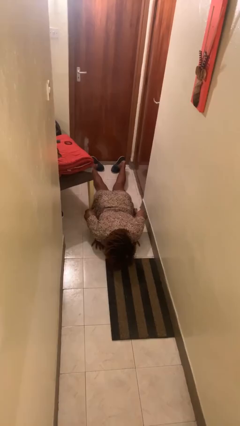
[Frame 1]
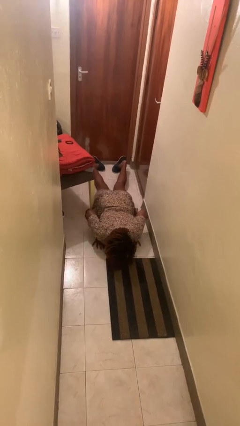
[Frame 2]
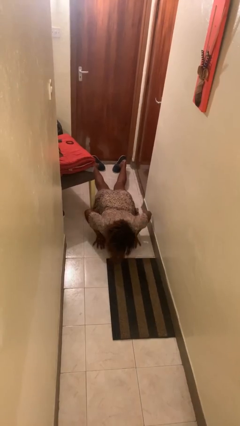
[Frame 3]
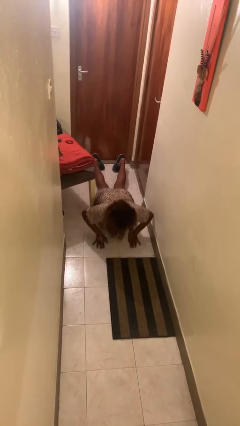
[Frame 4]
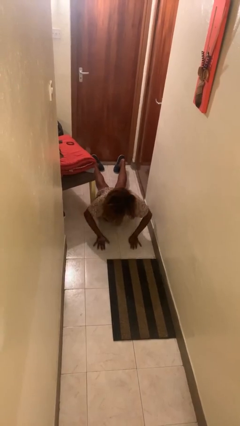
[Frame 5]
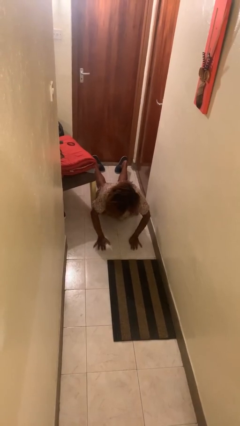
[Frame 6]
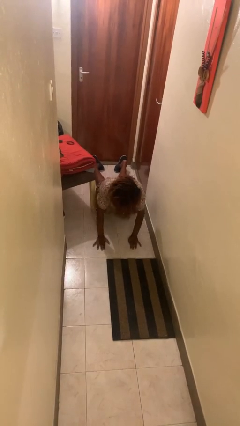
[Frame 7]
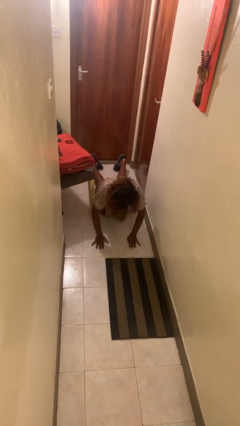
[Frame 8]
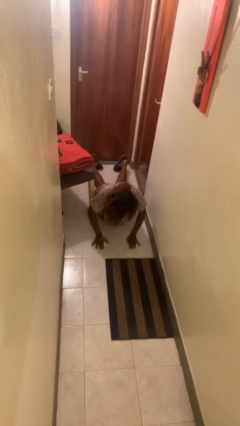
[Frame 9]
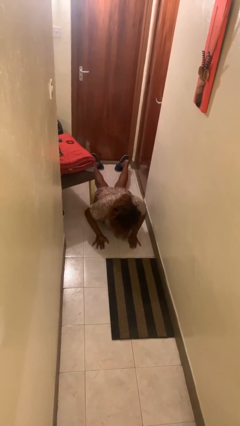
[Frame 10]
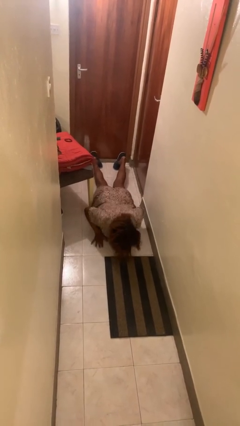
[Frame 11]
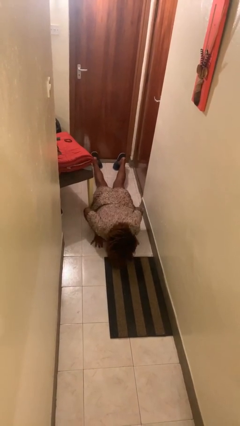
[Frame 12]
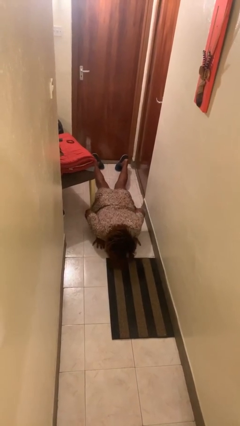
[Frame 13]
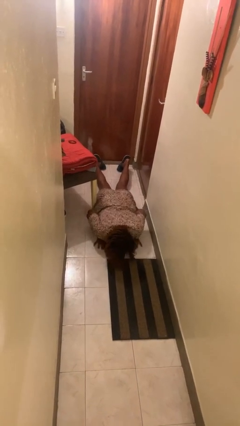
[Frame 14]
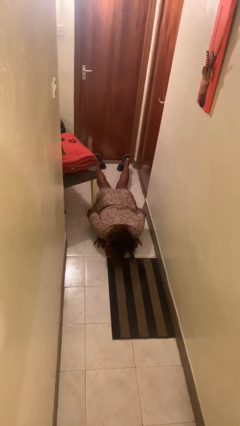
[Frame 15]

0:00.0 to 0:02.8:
person exercises with pushup

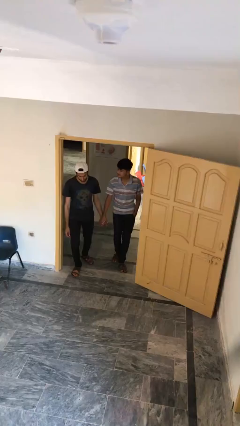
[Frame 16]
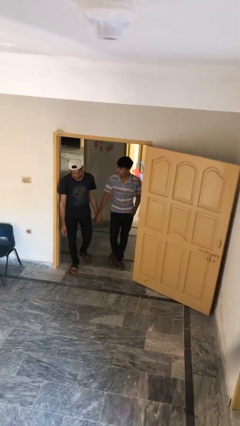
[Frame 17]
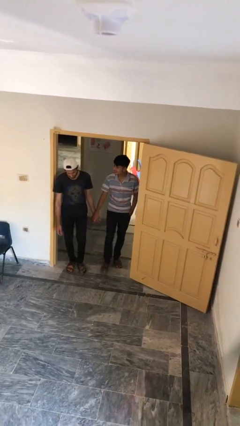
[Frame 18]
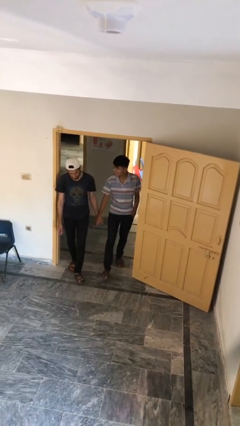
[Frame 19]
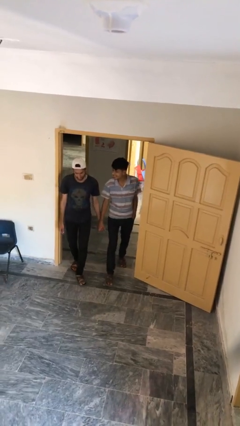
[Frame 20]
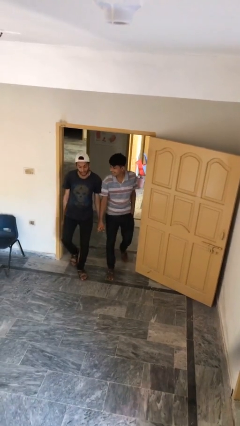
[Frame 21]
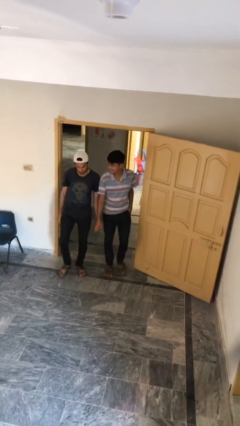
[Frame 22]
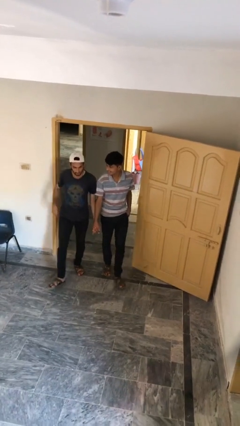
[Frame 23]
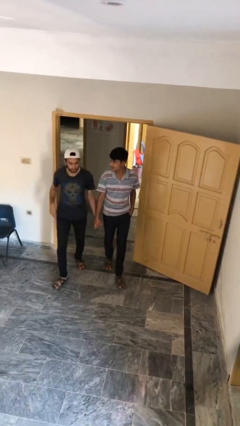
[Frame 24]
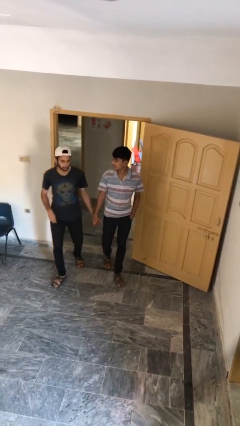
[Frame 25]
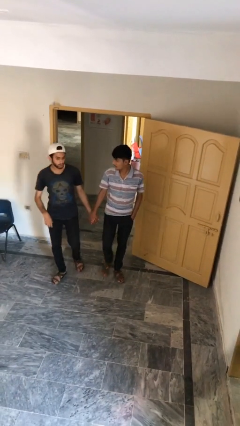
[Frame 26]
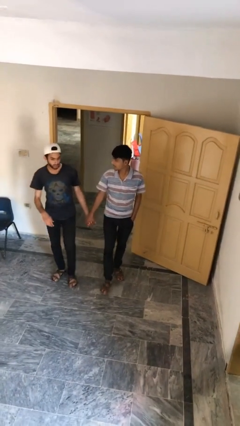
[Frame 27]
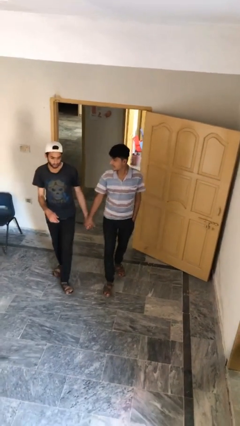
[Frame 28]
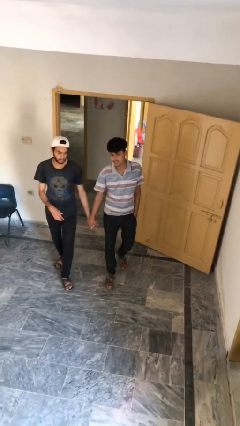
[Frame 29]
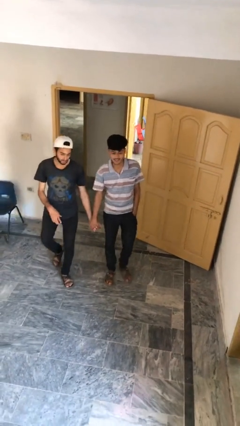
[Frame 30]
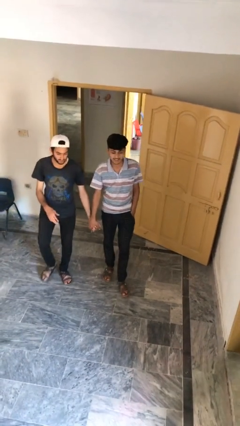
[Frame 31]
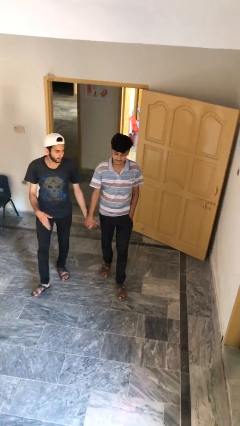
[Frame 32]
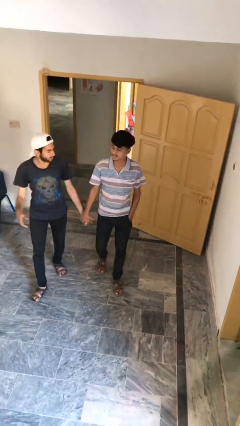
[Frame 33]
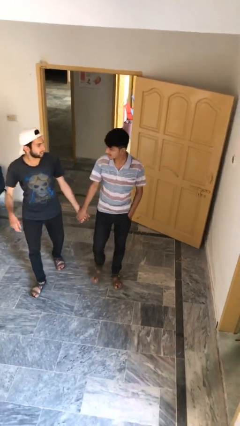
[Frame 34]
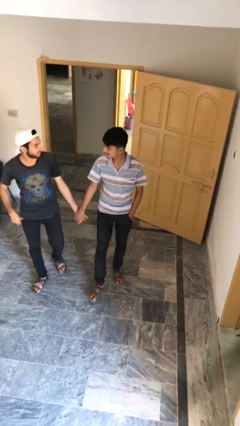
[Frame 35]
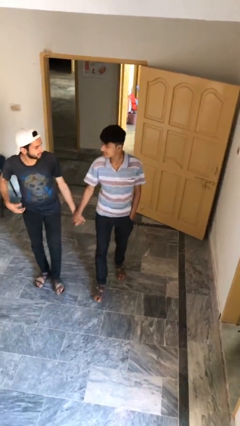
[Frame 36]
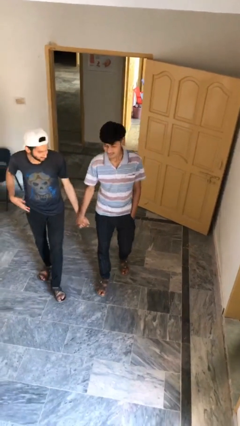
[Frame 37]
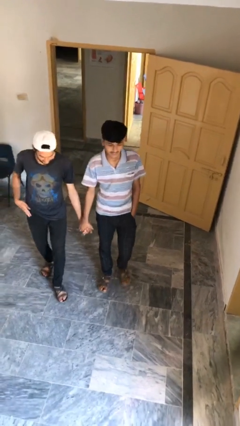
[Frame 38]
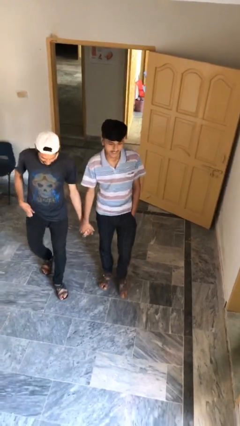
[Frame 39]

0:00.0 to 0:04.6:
person holds hand

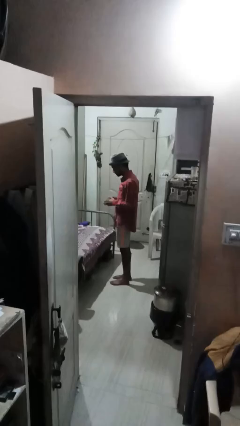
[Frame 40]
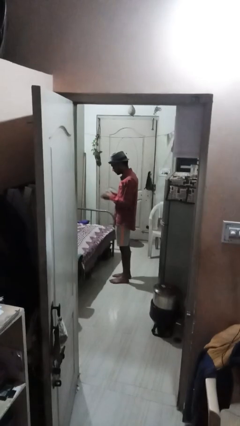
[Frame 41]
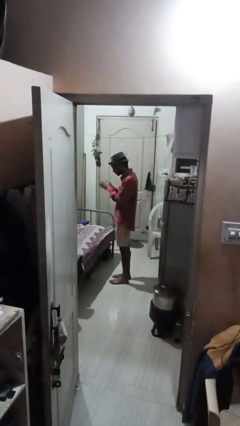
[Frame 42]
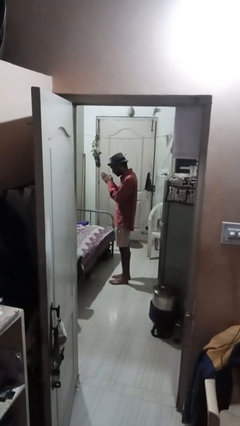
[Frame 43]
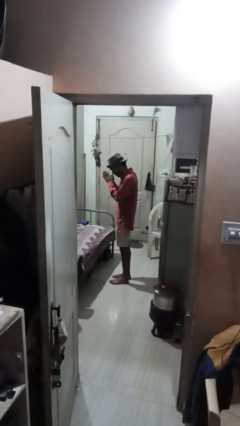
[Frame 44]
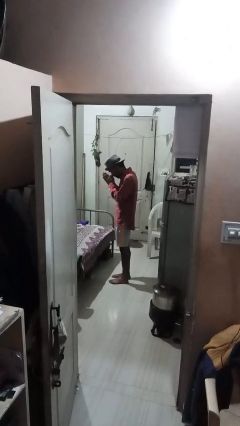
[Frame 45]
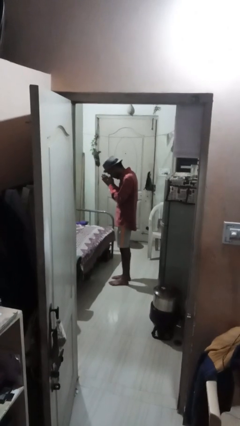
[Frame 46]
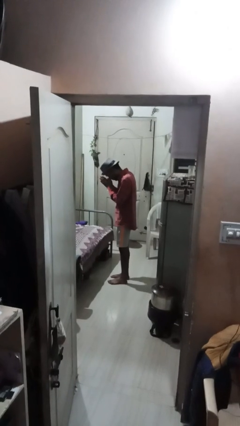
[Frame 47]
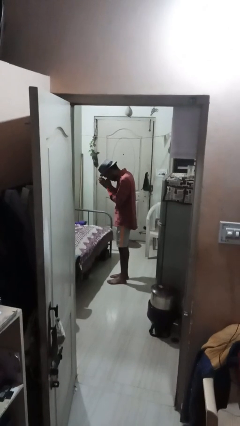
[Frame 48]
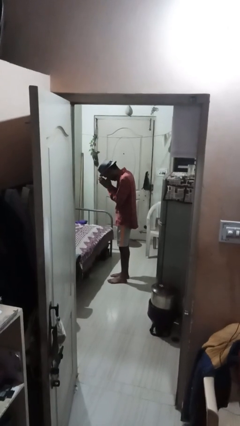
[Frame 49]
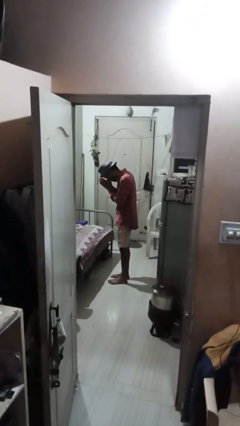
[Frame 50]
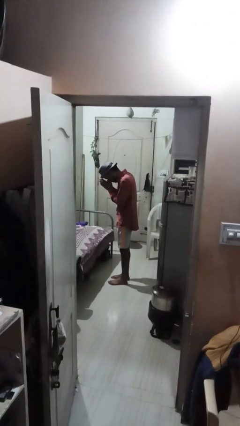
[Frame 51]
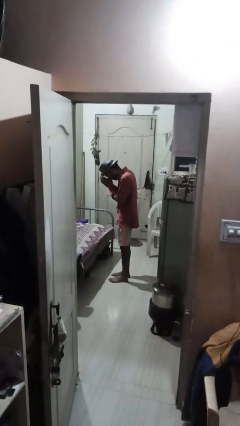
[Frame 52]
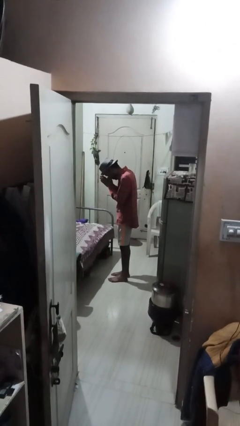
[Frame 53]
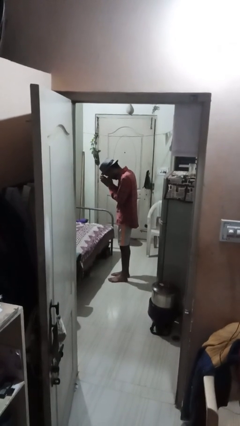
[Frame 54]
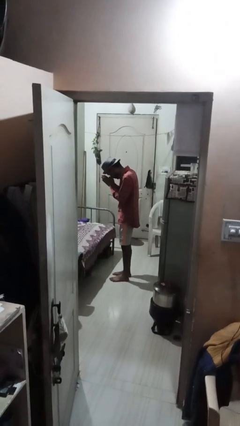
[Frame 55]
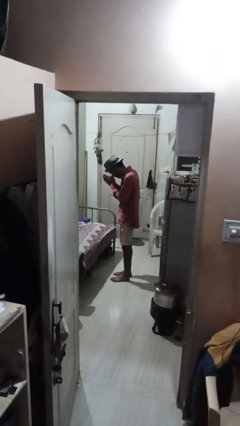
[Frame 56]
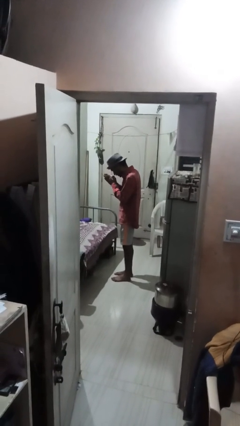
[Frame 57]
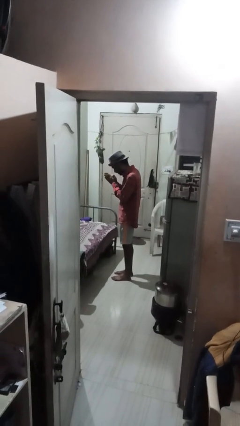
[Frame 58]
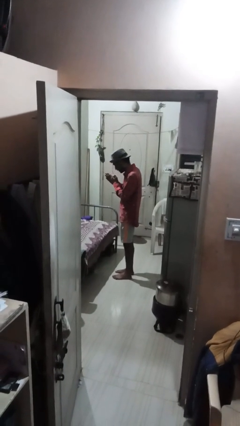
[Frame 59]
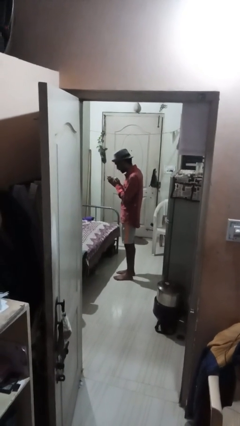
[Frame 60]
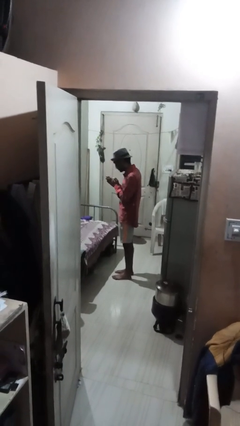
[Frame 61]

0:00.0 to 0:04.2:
person prays

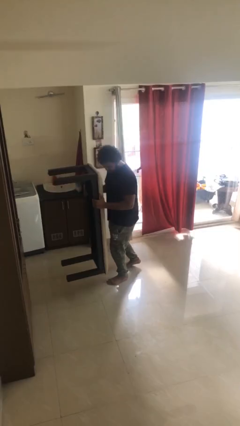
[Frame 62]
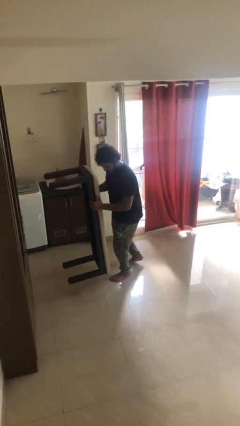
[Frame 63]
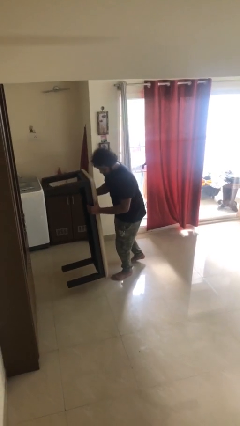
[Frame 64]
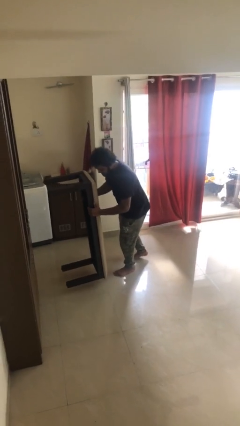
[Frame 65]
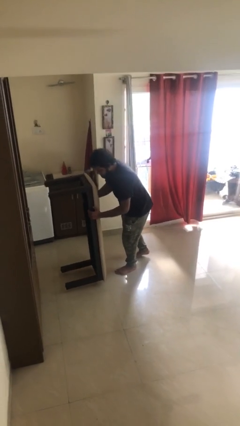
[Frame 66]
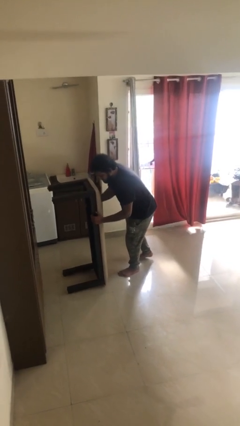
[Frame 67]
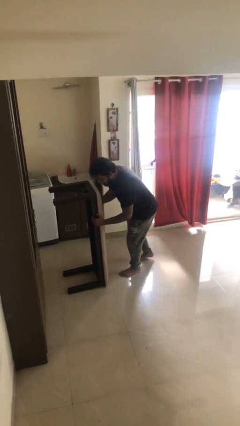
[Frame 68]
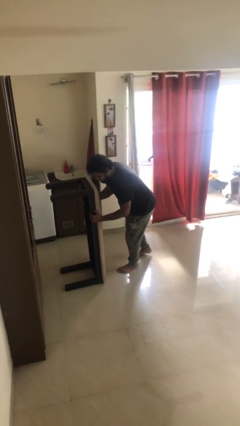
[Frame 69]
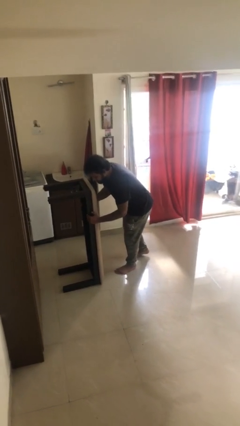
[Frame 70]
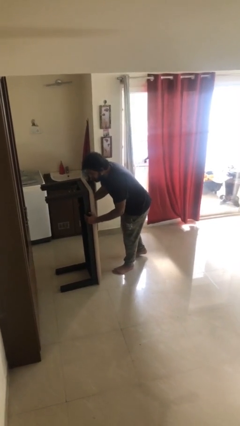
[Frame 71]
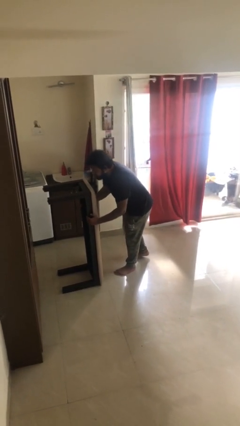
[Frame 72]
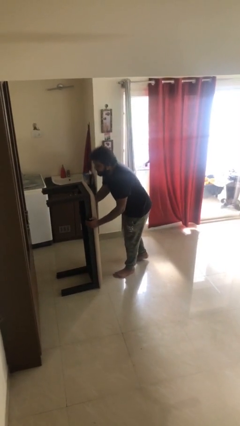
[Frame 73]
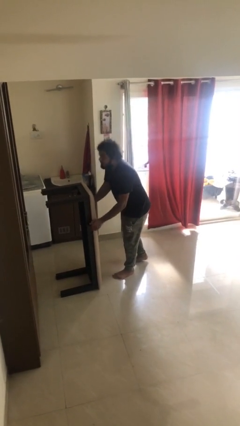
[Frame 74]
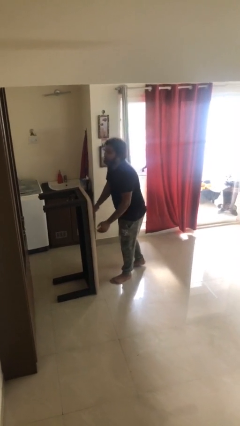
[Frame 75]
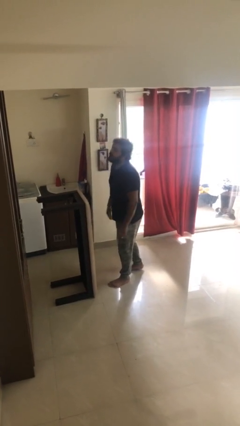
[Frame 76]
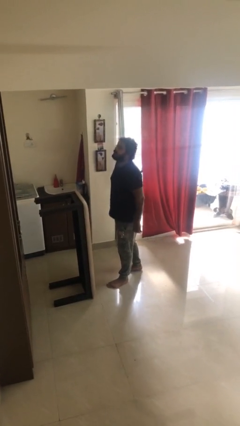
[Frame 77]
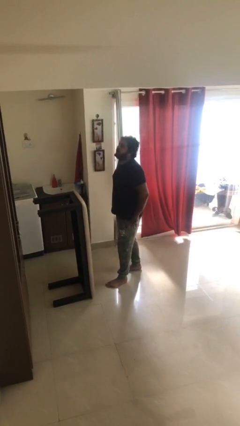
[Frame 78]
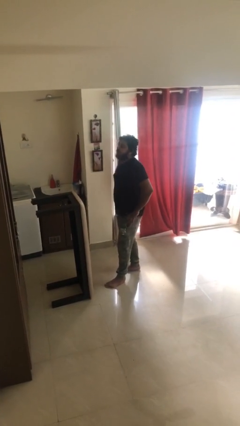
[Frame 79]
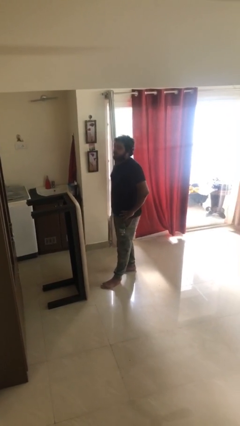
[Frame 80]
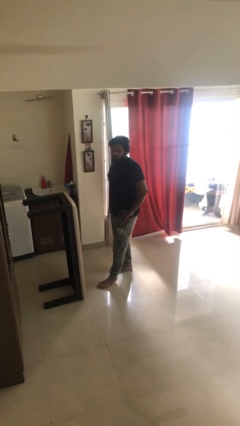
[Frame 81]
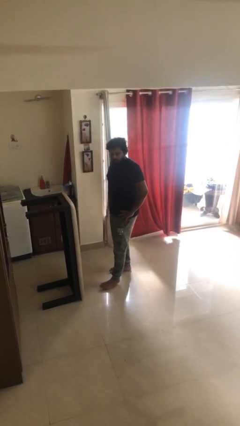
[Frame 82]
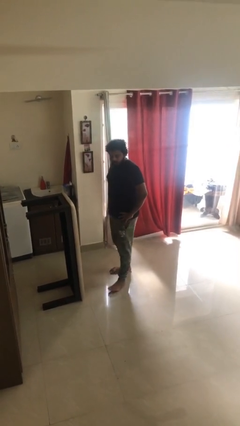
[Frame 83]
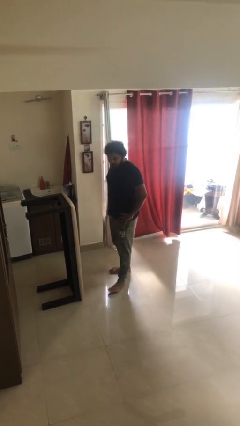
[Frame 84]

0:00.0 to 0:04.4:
person puts down object on floor

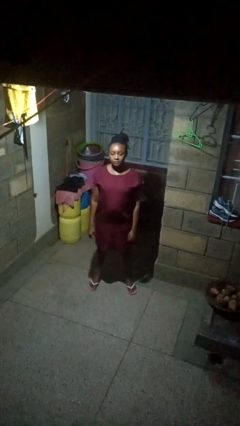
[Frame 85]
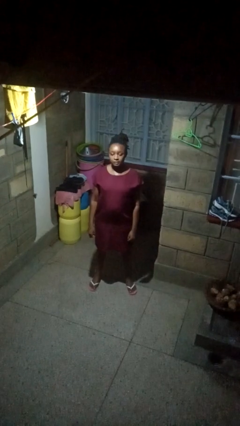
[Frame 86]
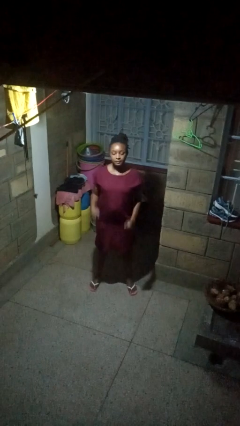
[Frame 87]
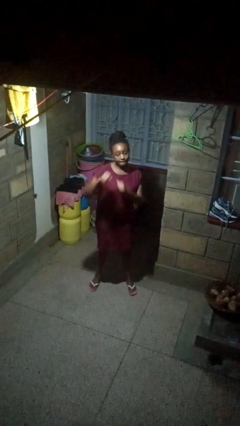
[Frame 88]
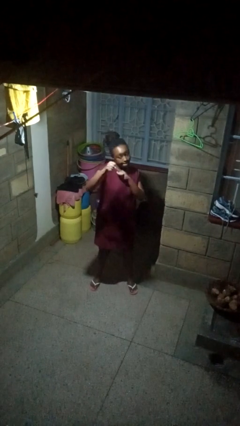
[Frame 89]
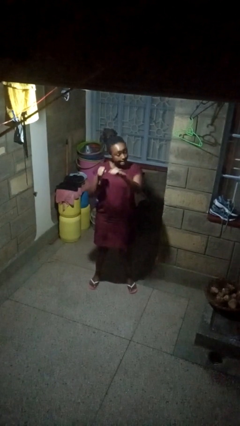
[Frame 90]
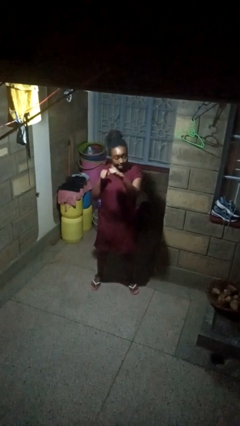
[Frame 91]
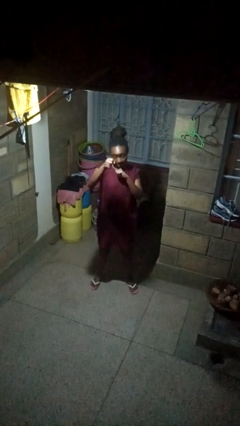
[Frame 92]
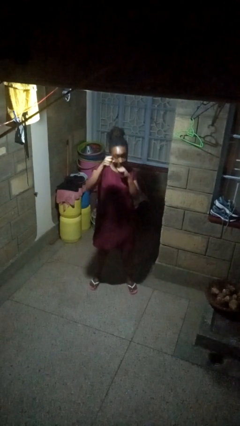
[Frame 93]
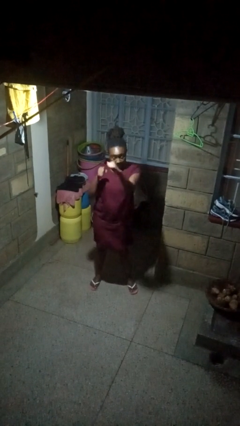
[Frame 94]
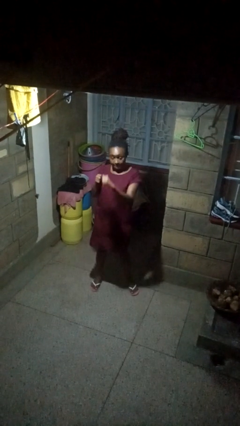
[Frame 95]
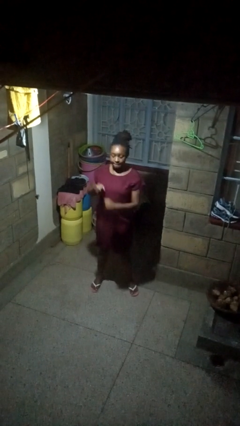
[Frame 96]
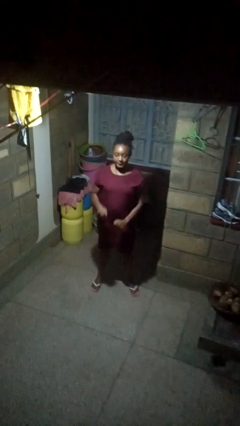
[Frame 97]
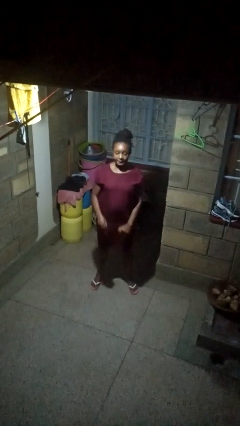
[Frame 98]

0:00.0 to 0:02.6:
person punches
